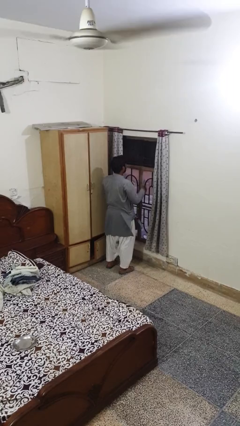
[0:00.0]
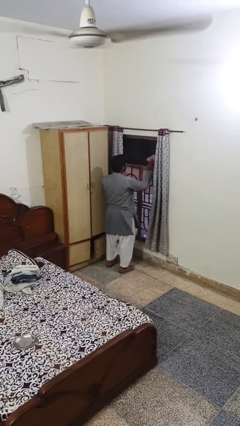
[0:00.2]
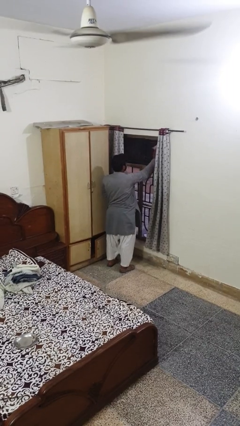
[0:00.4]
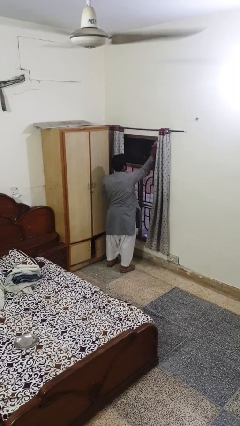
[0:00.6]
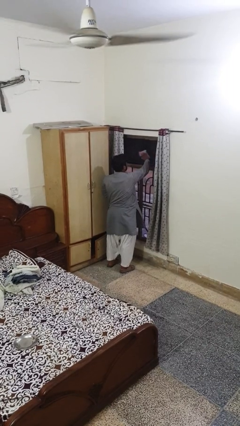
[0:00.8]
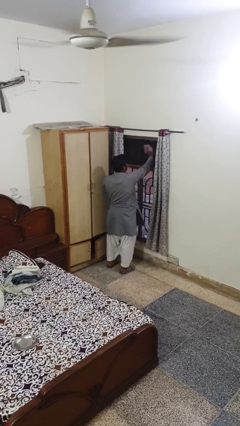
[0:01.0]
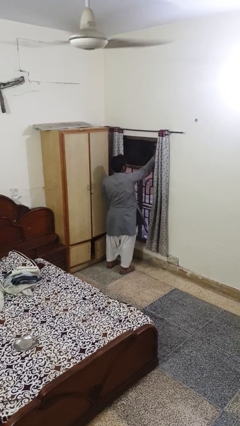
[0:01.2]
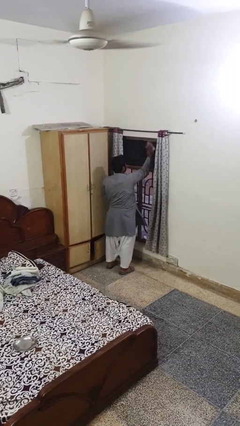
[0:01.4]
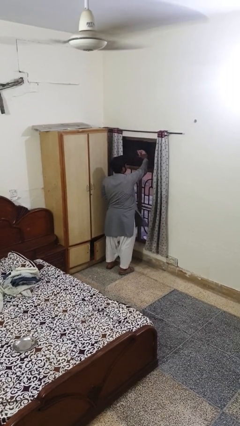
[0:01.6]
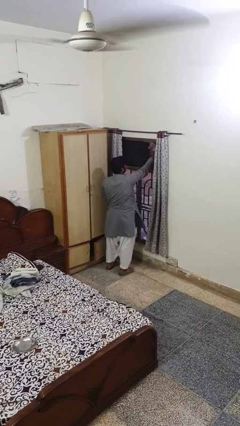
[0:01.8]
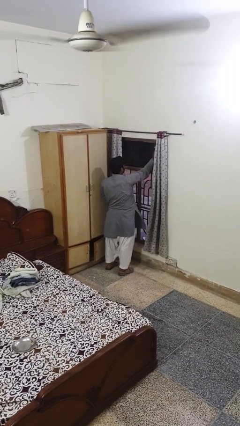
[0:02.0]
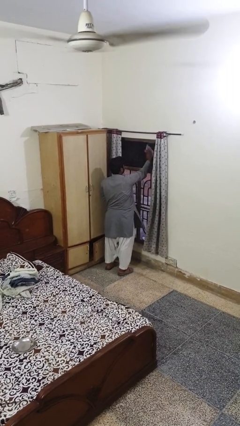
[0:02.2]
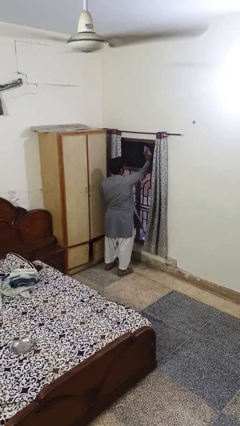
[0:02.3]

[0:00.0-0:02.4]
person washes window

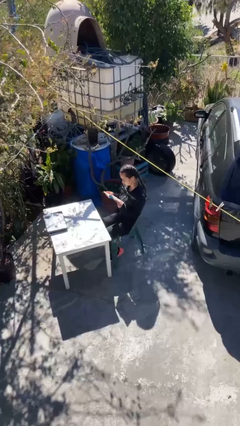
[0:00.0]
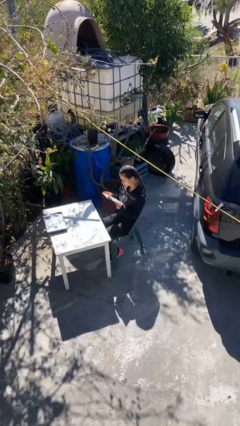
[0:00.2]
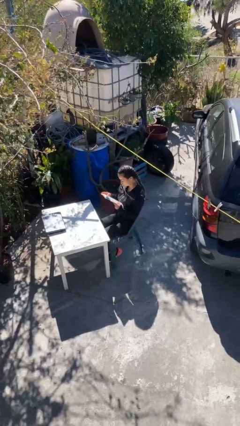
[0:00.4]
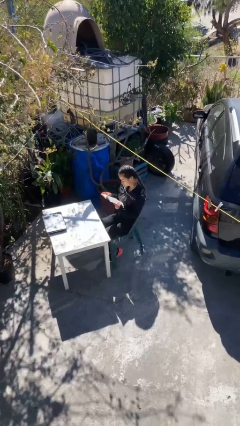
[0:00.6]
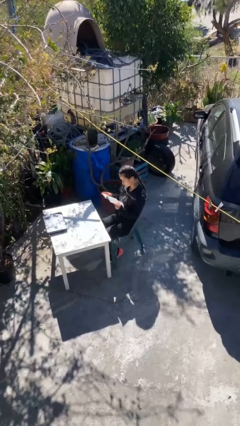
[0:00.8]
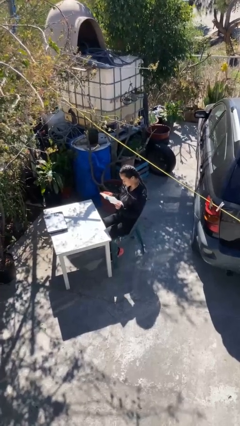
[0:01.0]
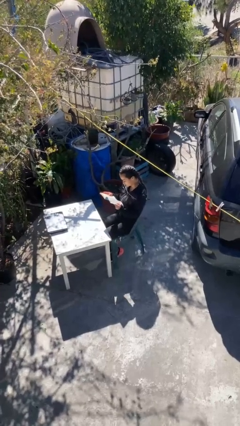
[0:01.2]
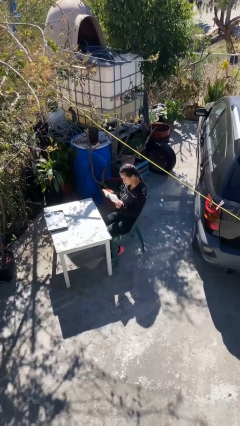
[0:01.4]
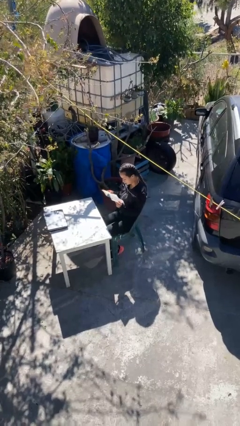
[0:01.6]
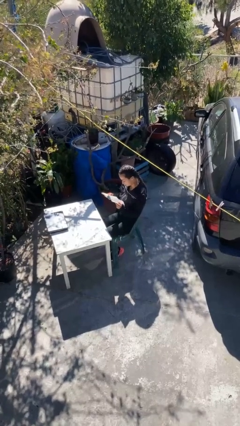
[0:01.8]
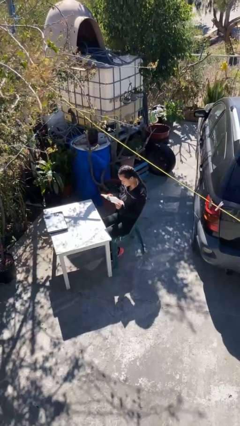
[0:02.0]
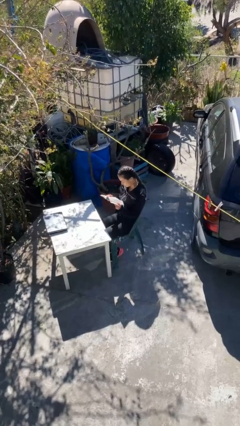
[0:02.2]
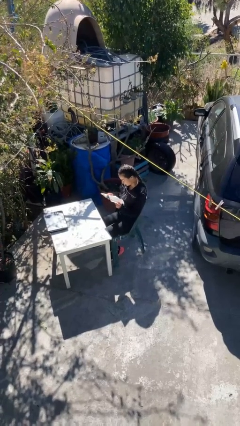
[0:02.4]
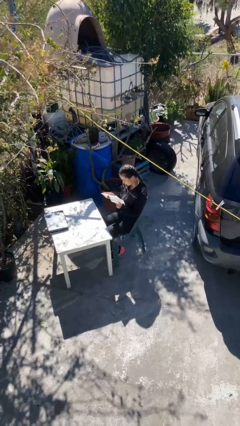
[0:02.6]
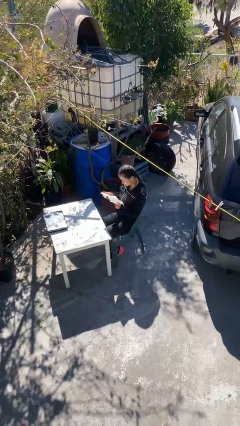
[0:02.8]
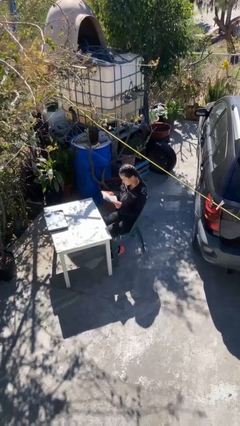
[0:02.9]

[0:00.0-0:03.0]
person reads document

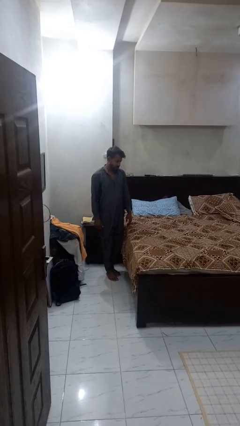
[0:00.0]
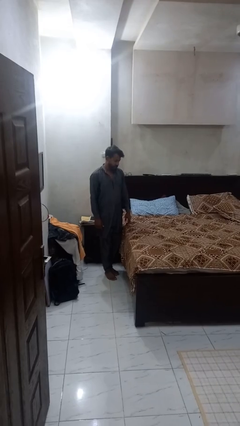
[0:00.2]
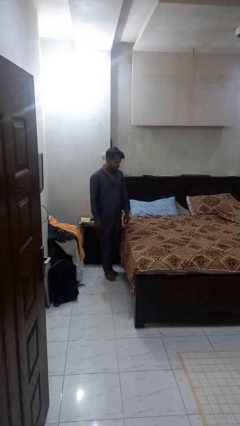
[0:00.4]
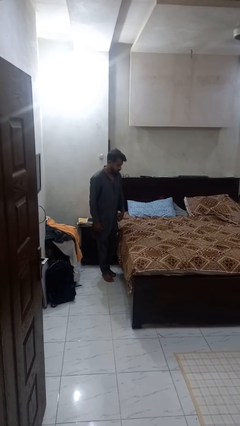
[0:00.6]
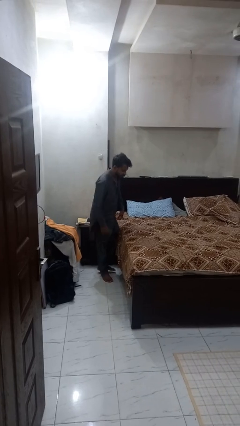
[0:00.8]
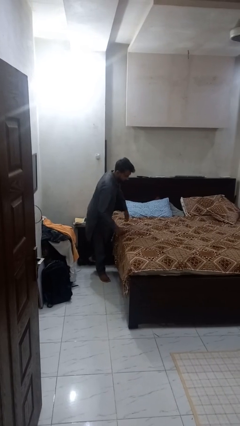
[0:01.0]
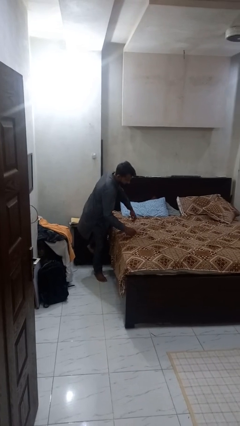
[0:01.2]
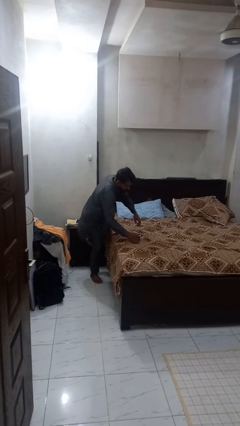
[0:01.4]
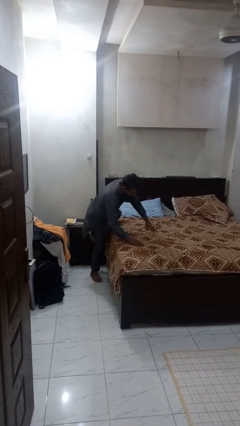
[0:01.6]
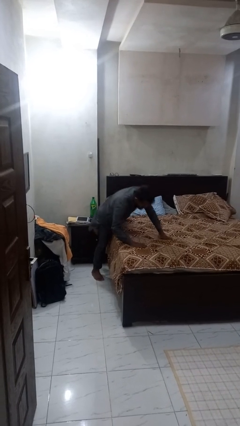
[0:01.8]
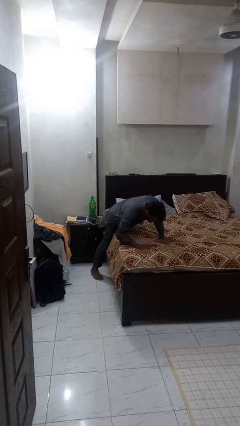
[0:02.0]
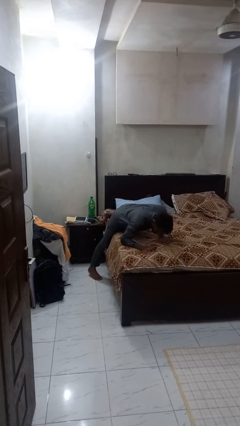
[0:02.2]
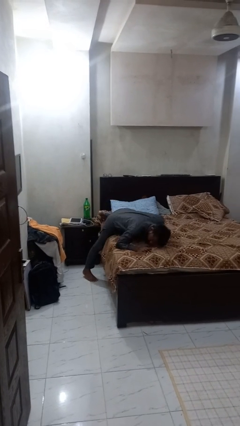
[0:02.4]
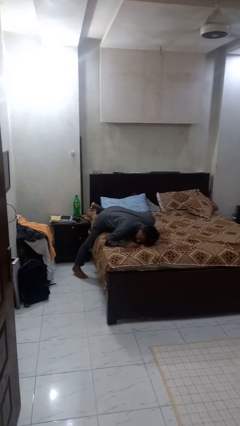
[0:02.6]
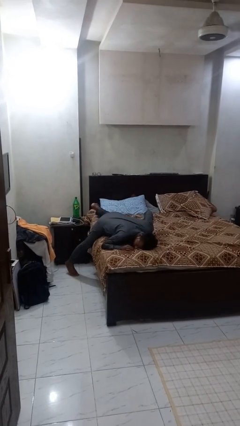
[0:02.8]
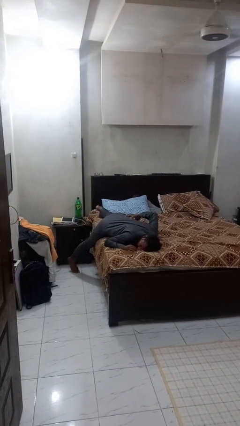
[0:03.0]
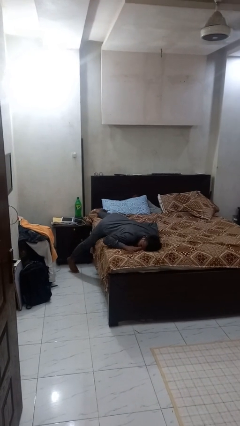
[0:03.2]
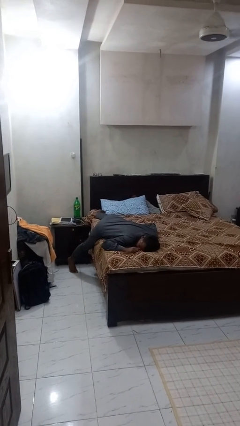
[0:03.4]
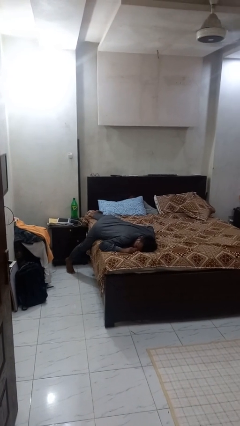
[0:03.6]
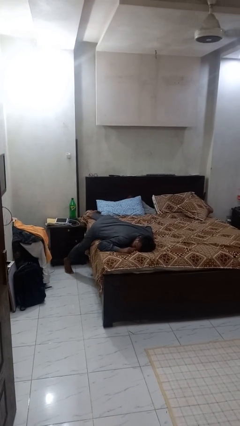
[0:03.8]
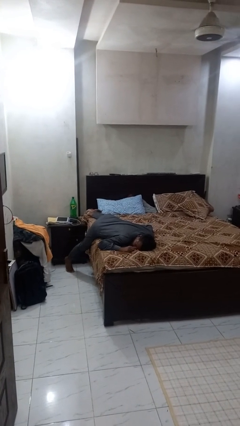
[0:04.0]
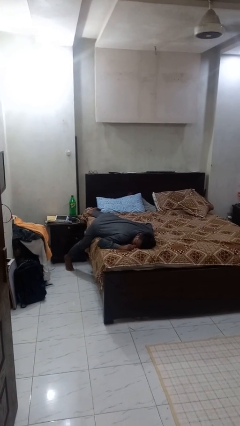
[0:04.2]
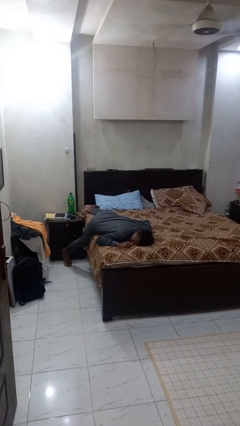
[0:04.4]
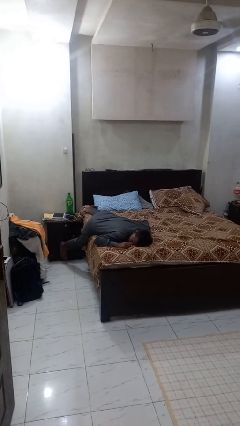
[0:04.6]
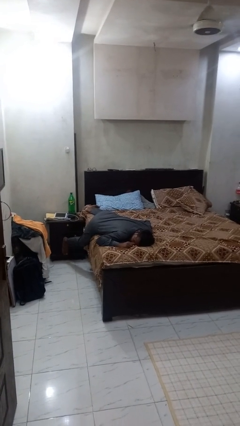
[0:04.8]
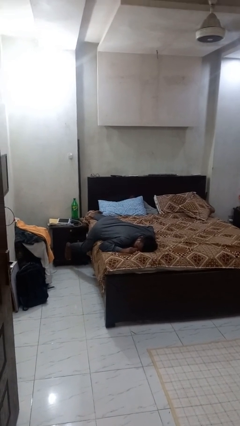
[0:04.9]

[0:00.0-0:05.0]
person lies down on bed

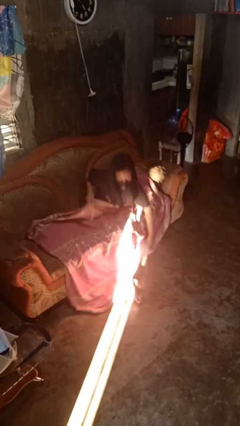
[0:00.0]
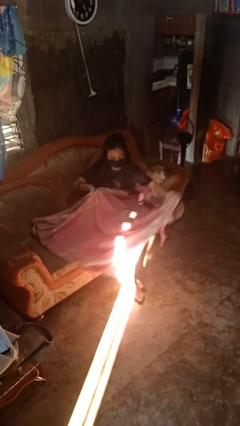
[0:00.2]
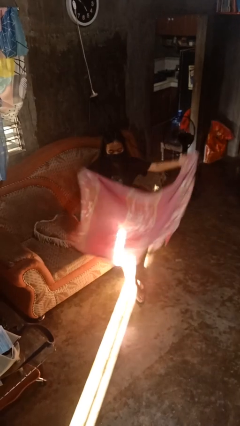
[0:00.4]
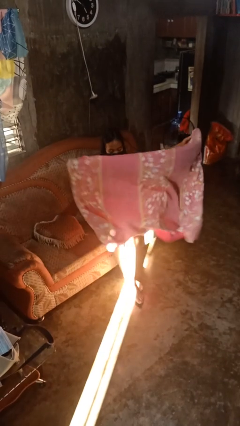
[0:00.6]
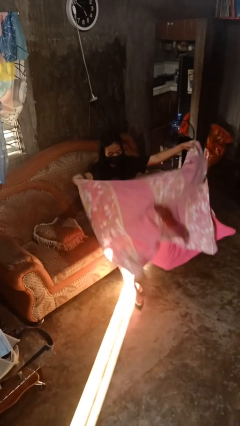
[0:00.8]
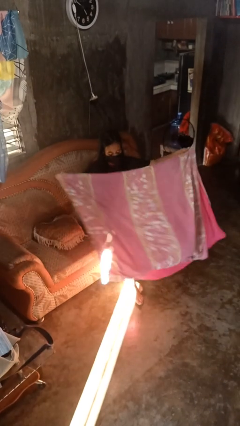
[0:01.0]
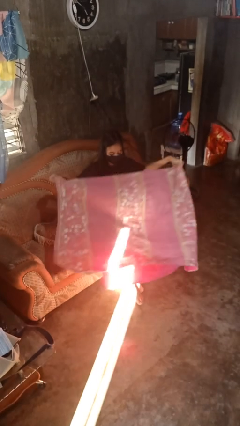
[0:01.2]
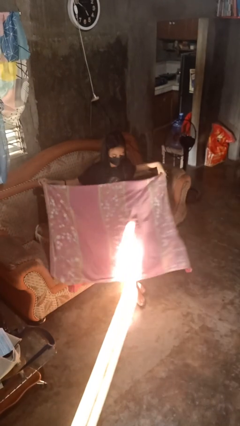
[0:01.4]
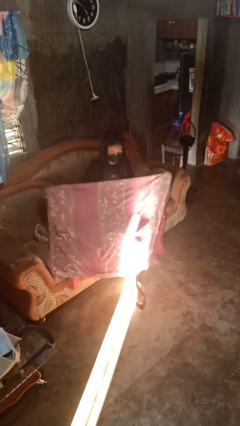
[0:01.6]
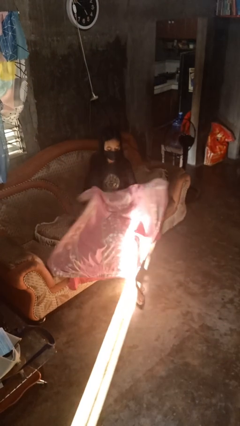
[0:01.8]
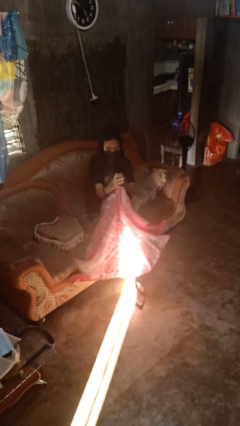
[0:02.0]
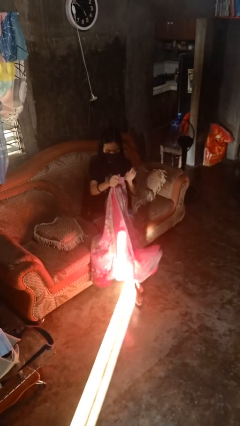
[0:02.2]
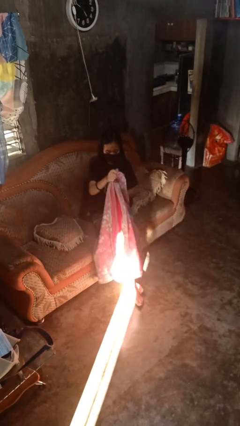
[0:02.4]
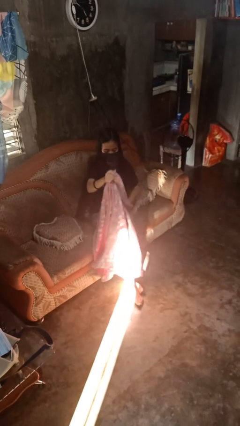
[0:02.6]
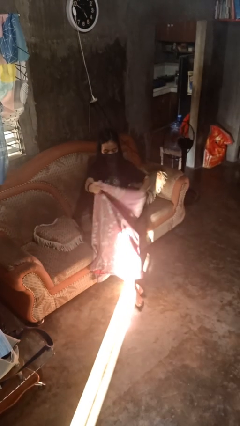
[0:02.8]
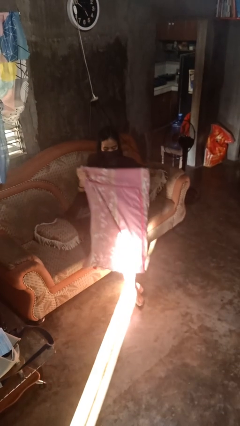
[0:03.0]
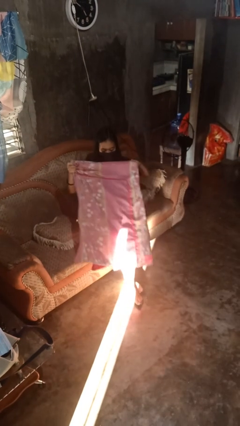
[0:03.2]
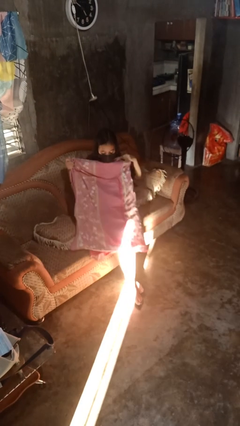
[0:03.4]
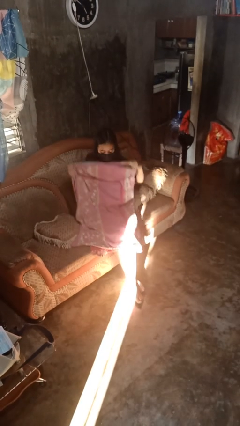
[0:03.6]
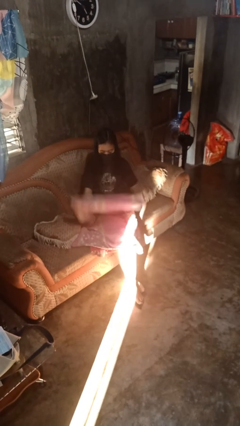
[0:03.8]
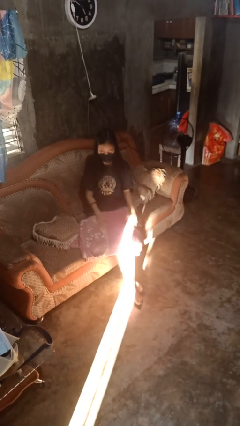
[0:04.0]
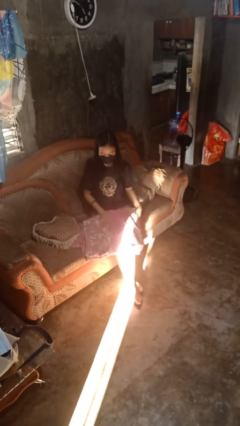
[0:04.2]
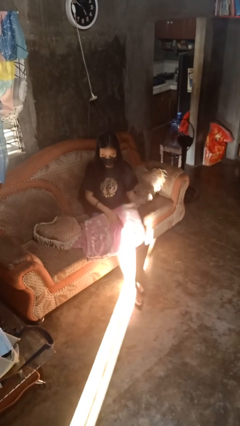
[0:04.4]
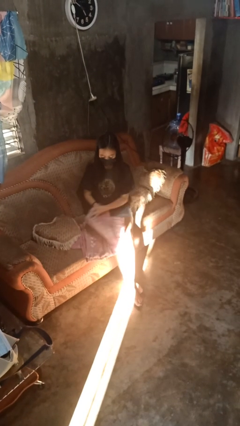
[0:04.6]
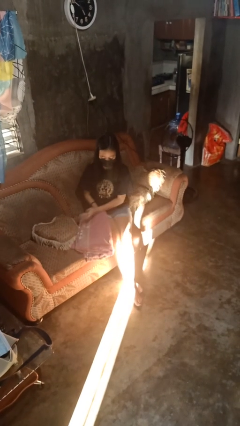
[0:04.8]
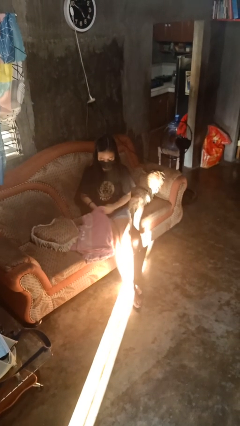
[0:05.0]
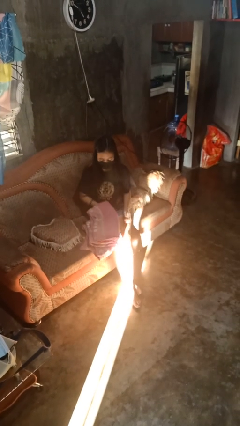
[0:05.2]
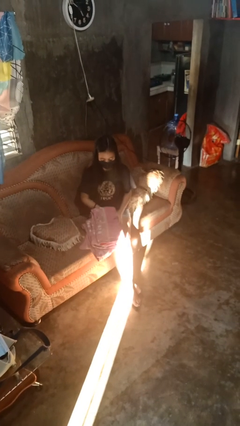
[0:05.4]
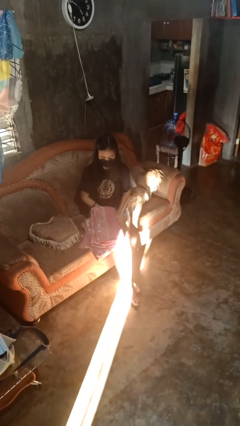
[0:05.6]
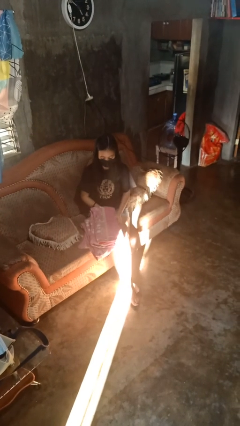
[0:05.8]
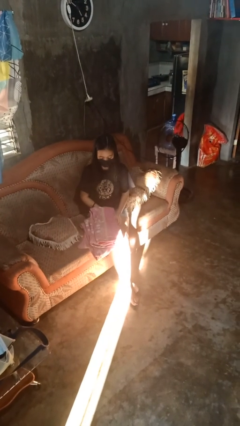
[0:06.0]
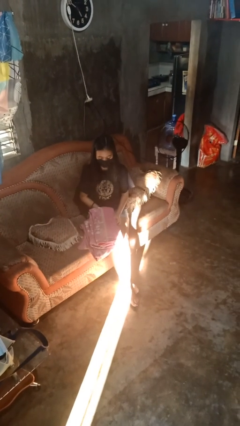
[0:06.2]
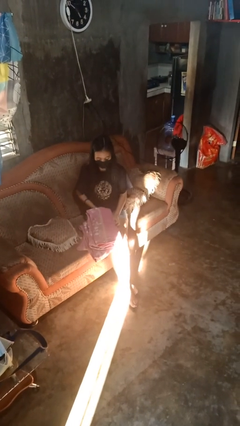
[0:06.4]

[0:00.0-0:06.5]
person folds blanket

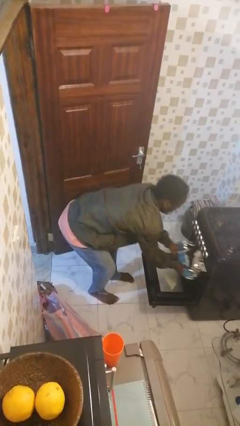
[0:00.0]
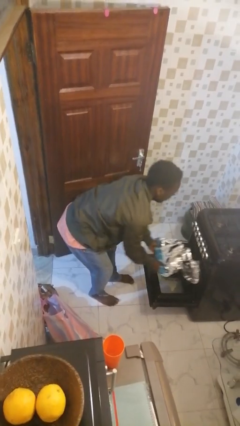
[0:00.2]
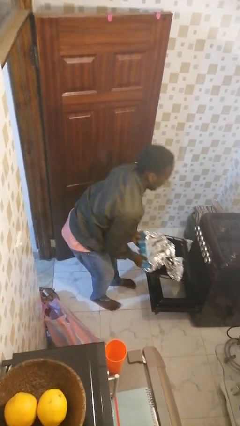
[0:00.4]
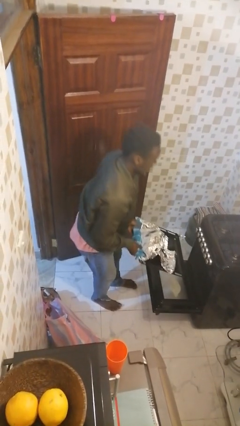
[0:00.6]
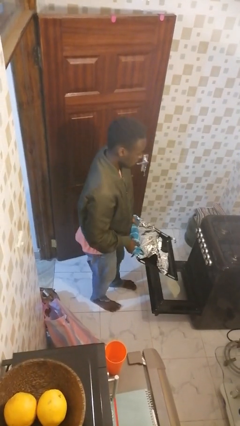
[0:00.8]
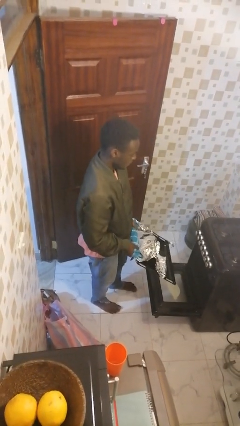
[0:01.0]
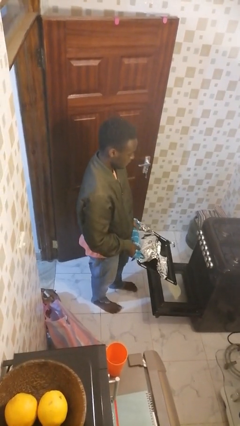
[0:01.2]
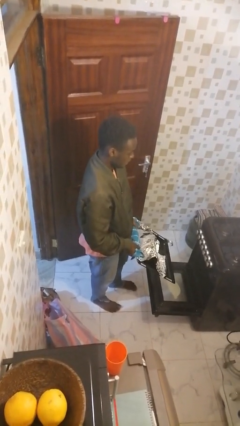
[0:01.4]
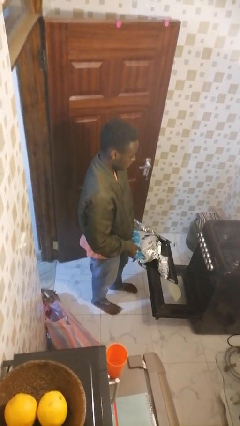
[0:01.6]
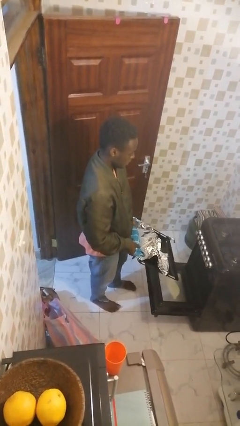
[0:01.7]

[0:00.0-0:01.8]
person takes object from oven
